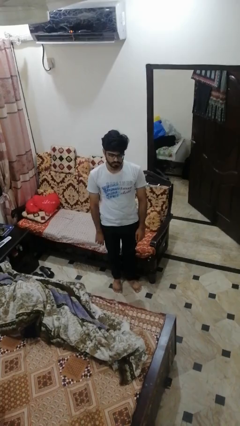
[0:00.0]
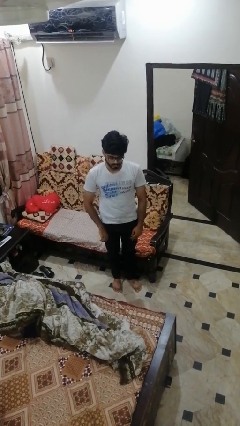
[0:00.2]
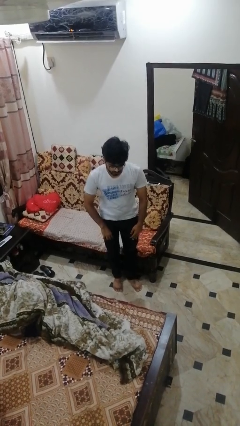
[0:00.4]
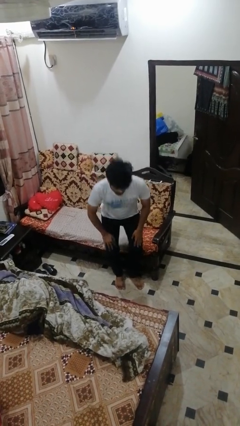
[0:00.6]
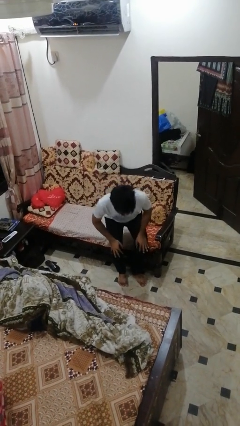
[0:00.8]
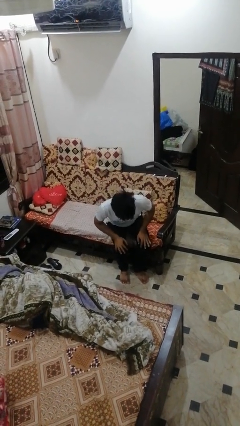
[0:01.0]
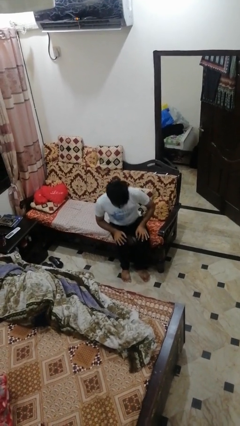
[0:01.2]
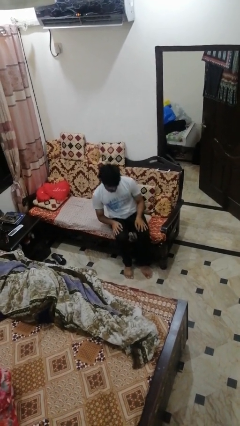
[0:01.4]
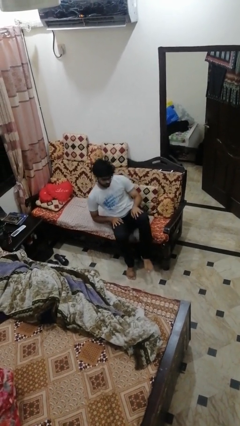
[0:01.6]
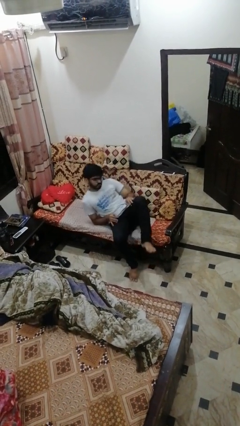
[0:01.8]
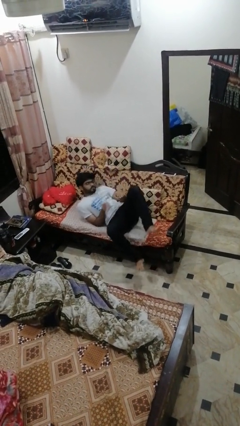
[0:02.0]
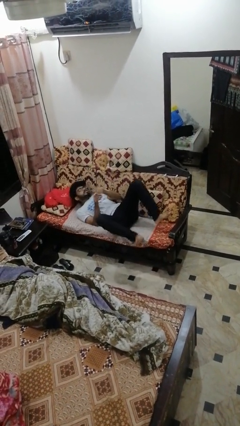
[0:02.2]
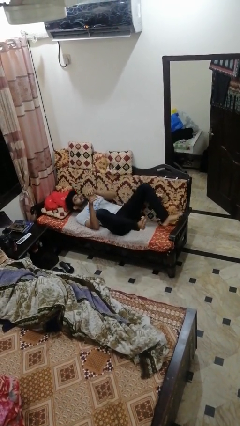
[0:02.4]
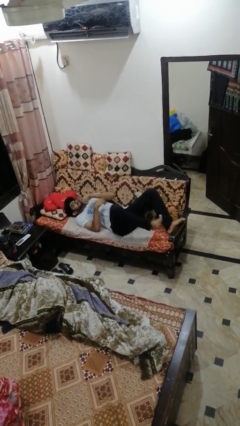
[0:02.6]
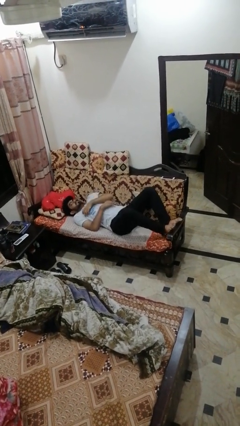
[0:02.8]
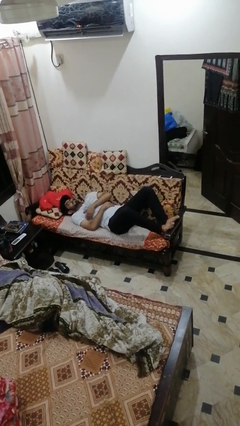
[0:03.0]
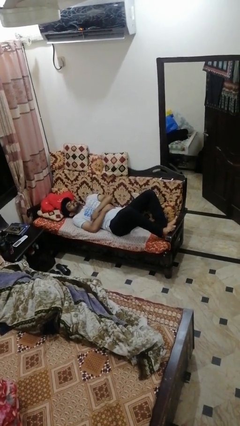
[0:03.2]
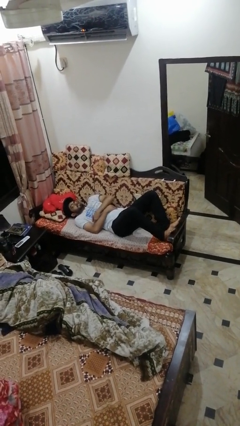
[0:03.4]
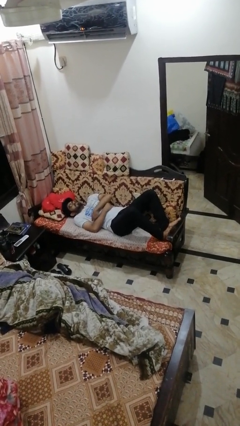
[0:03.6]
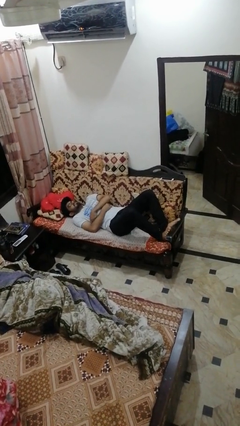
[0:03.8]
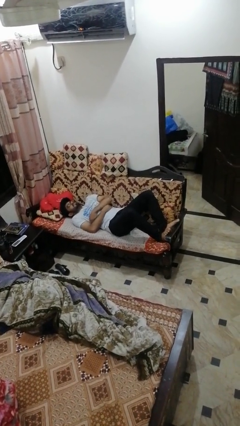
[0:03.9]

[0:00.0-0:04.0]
person lies down on couch

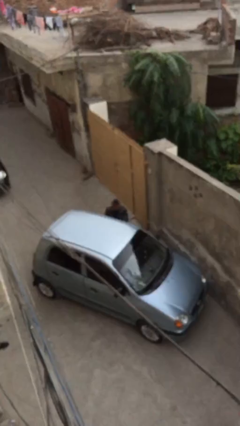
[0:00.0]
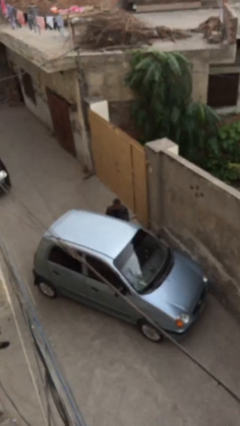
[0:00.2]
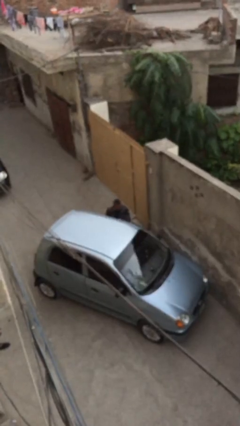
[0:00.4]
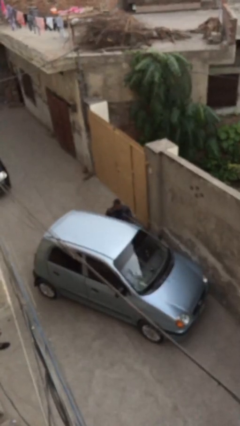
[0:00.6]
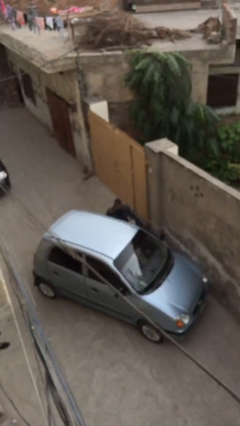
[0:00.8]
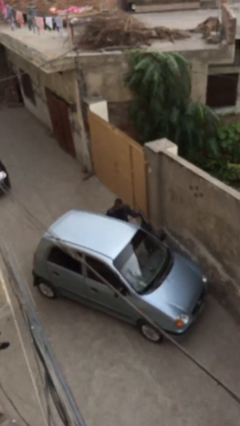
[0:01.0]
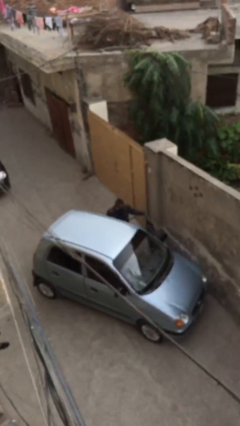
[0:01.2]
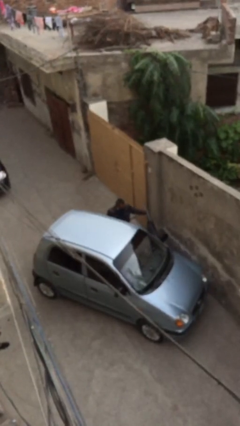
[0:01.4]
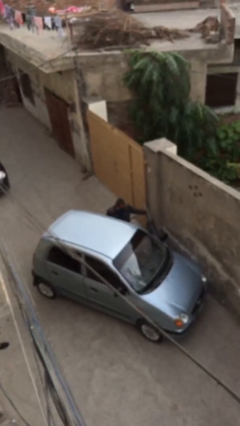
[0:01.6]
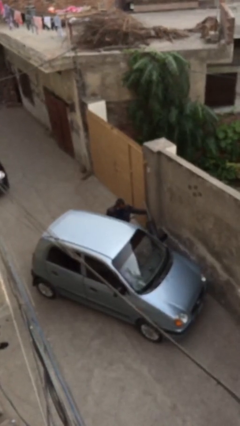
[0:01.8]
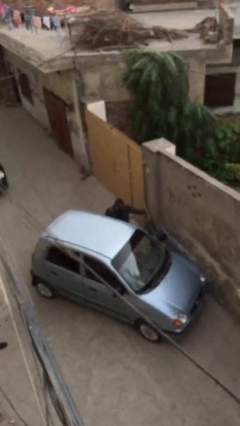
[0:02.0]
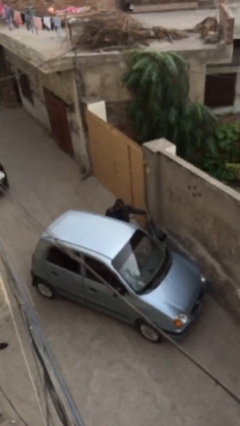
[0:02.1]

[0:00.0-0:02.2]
person opens car door

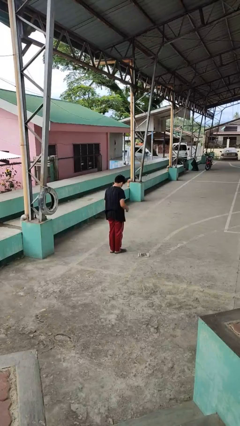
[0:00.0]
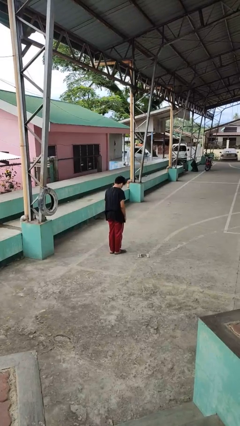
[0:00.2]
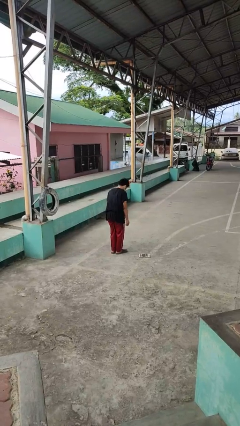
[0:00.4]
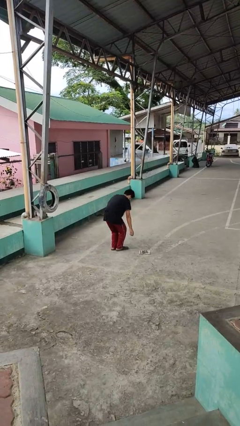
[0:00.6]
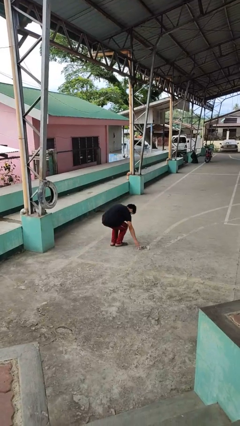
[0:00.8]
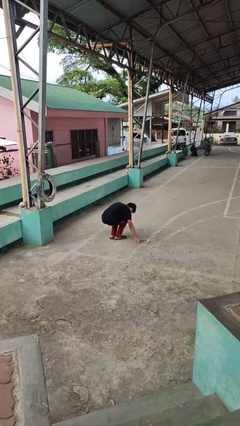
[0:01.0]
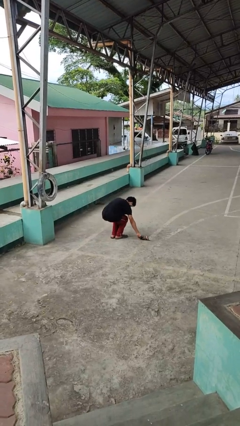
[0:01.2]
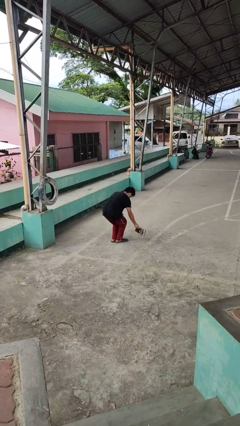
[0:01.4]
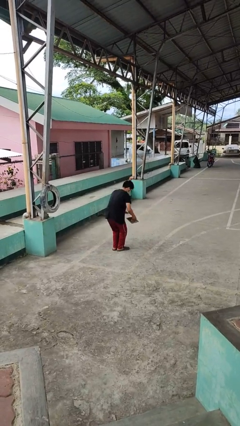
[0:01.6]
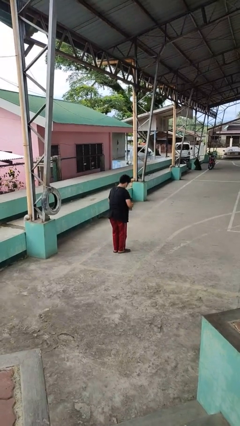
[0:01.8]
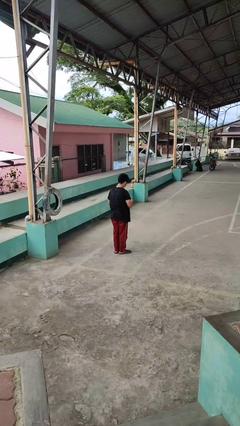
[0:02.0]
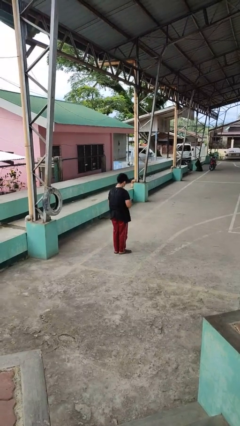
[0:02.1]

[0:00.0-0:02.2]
person picks up object from floor

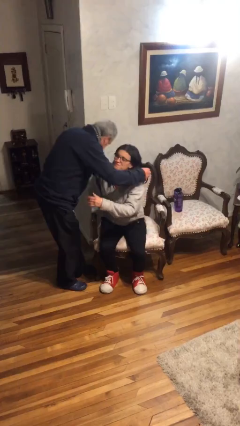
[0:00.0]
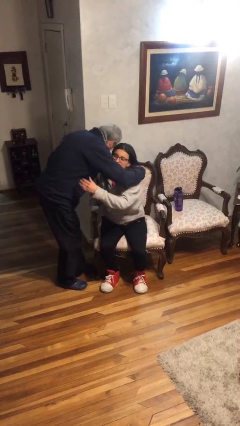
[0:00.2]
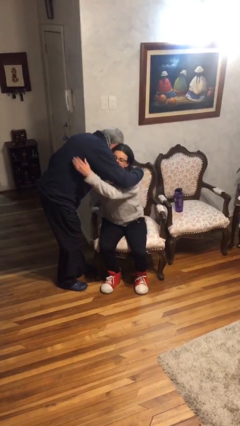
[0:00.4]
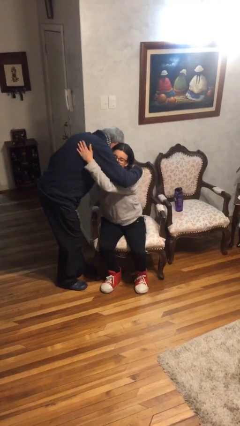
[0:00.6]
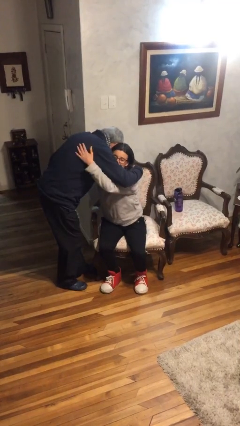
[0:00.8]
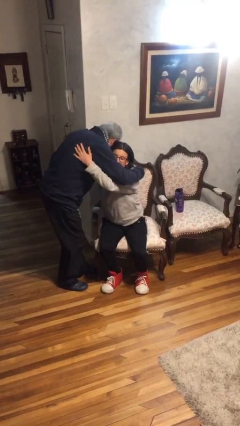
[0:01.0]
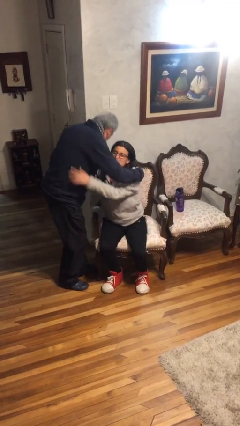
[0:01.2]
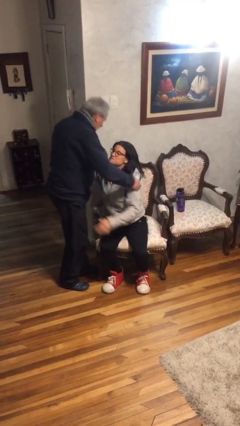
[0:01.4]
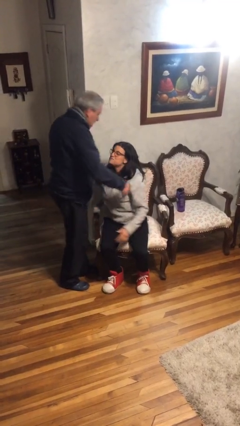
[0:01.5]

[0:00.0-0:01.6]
person embraces person

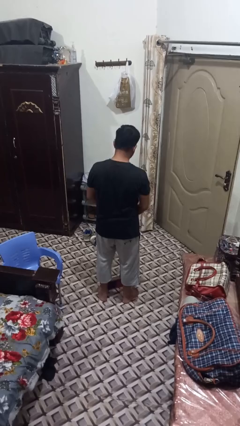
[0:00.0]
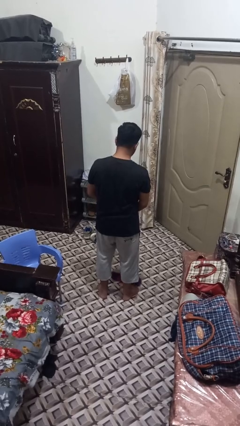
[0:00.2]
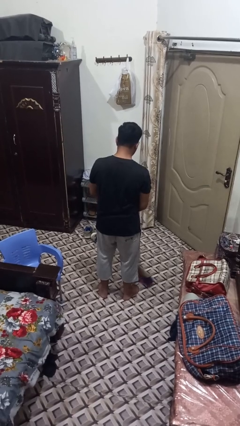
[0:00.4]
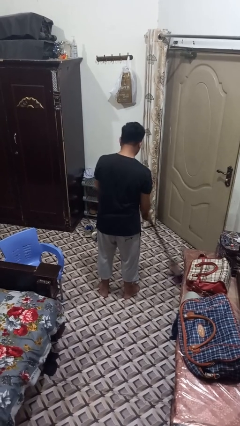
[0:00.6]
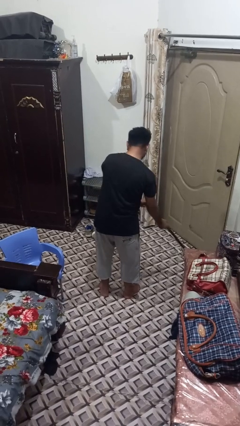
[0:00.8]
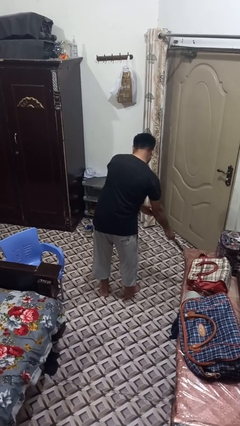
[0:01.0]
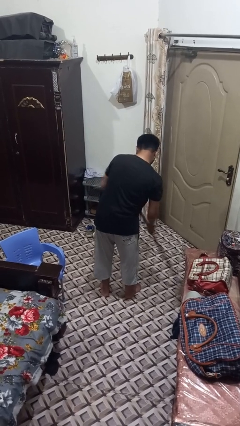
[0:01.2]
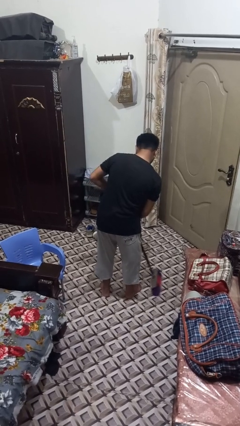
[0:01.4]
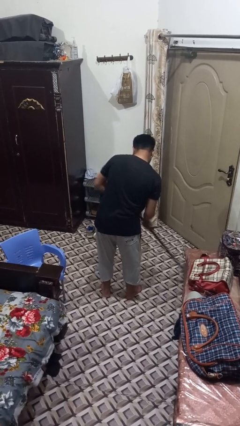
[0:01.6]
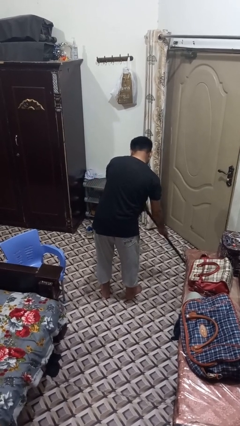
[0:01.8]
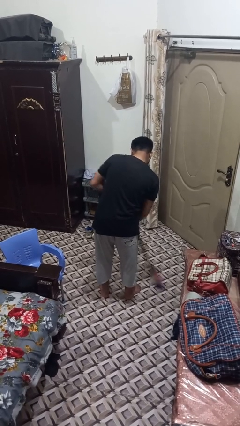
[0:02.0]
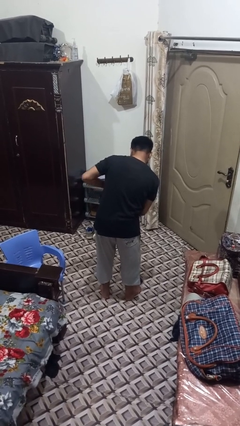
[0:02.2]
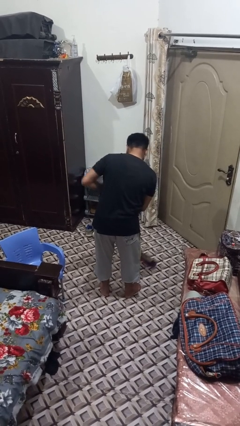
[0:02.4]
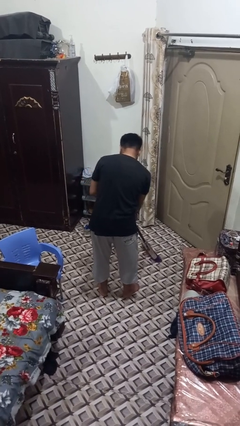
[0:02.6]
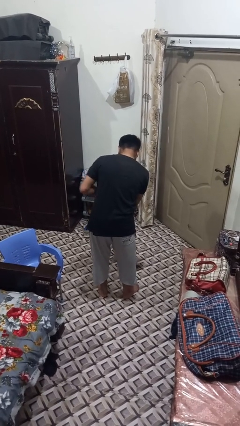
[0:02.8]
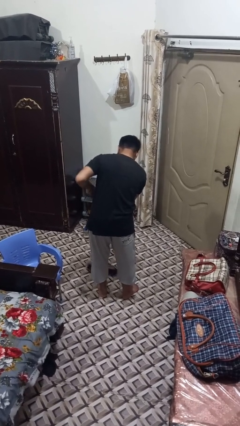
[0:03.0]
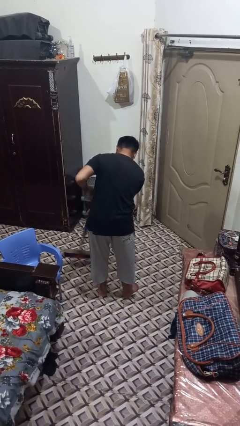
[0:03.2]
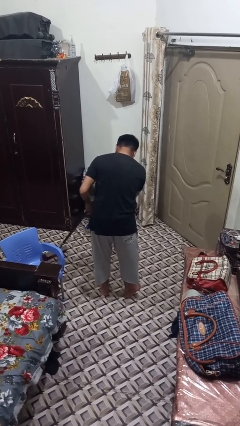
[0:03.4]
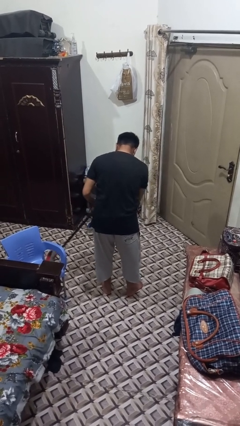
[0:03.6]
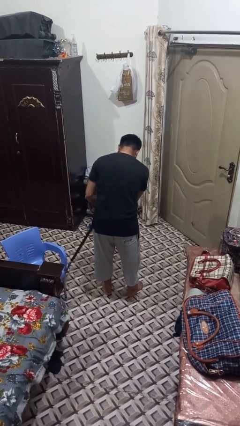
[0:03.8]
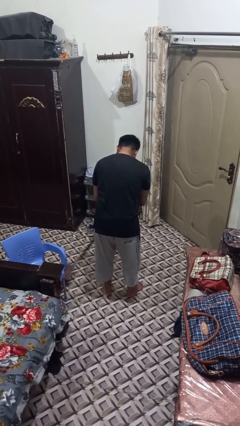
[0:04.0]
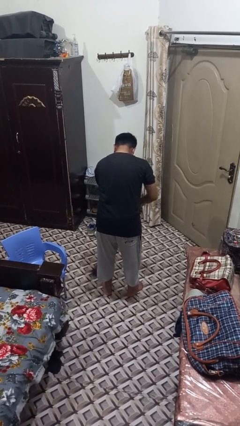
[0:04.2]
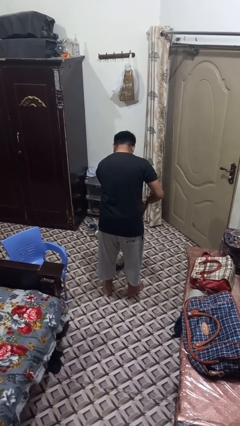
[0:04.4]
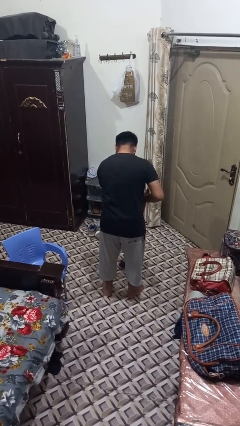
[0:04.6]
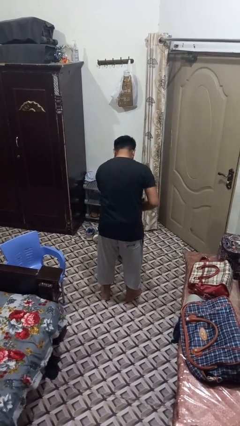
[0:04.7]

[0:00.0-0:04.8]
person sweeps floor

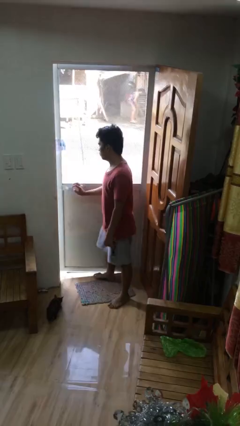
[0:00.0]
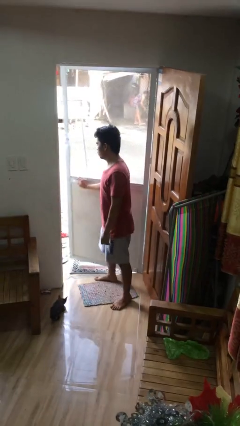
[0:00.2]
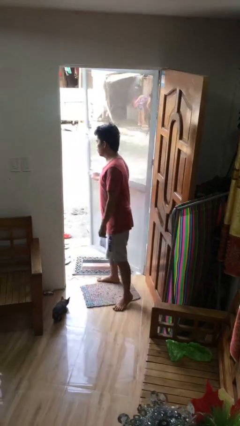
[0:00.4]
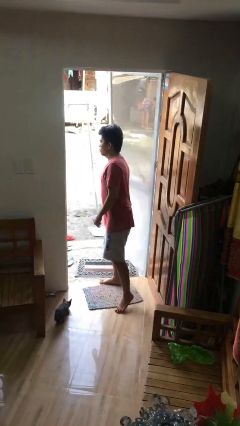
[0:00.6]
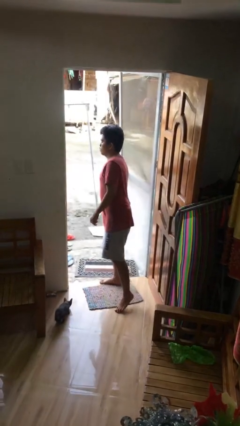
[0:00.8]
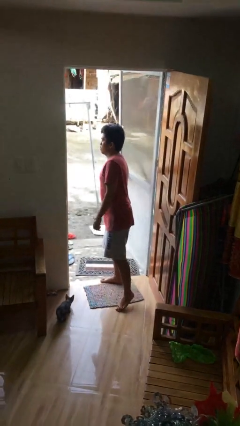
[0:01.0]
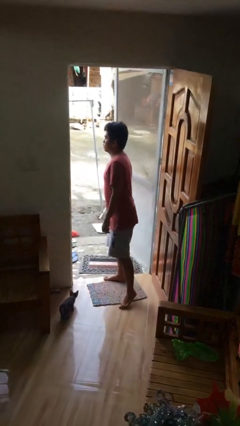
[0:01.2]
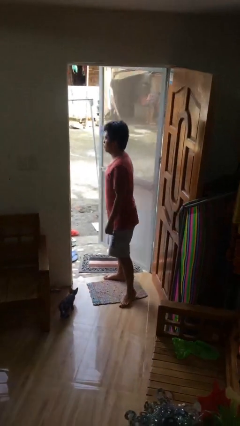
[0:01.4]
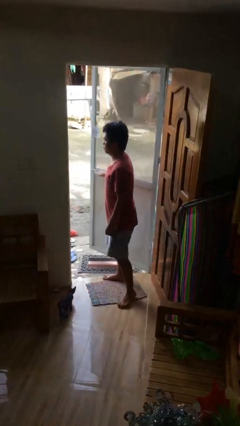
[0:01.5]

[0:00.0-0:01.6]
person opens facility door

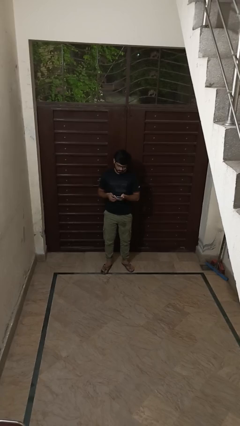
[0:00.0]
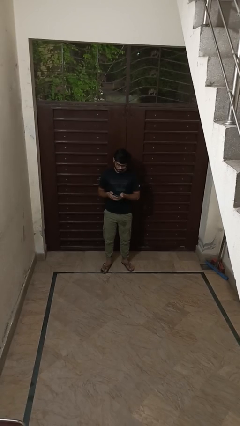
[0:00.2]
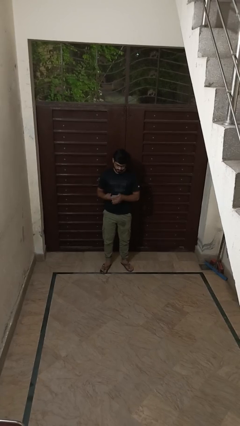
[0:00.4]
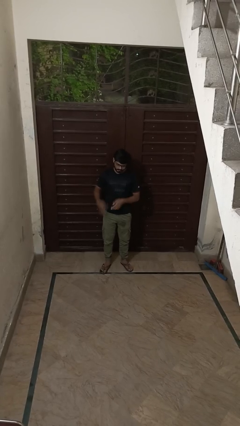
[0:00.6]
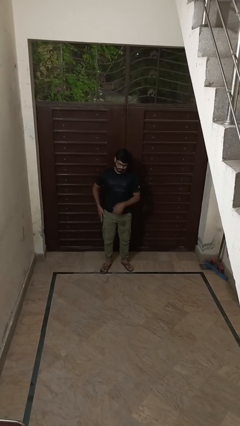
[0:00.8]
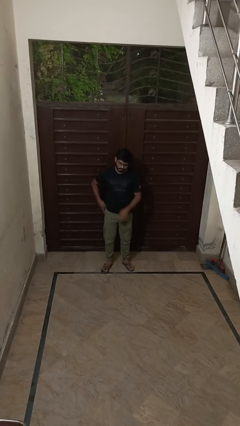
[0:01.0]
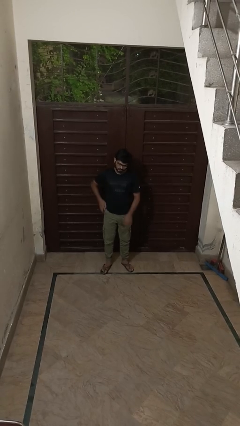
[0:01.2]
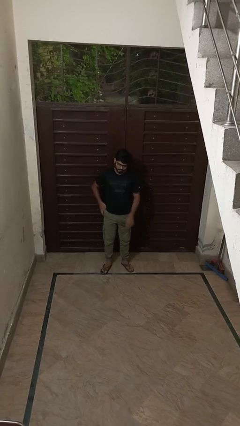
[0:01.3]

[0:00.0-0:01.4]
person puts phone into pocket
